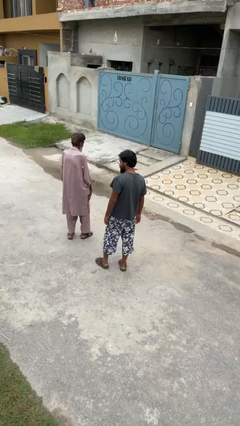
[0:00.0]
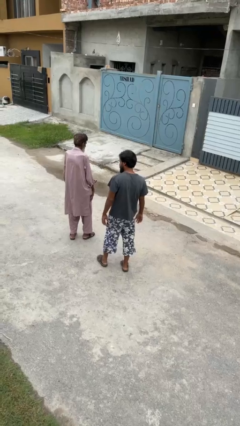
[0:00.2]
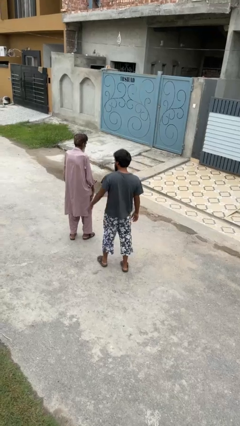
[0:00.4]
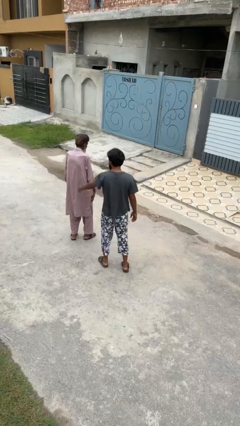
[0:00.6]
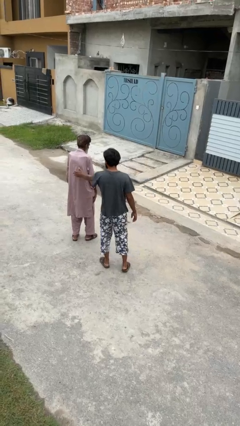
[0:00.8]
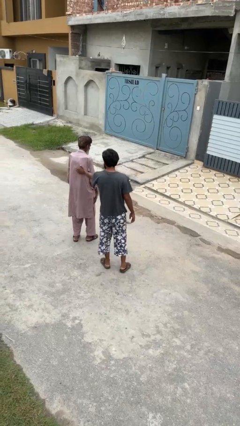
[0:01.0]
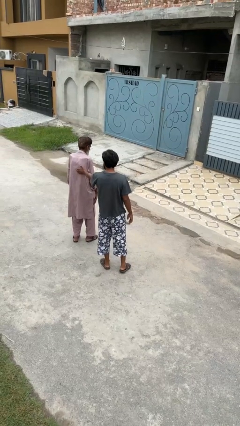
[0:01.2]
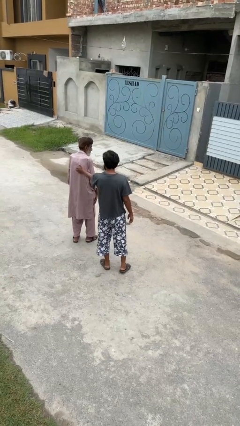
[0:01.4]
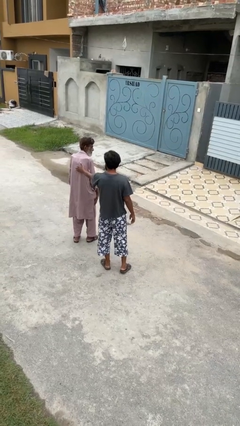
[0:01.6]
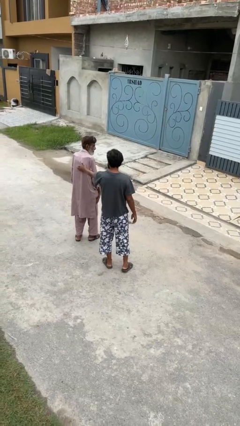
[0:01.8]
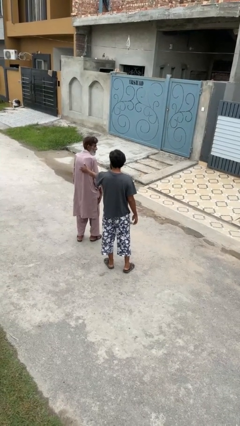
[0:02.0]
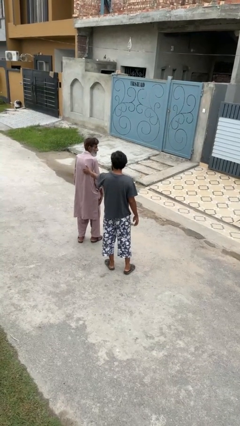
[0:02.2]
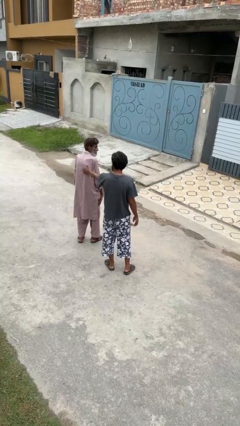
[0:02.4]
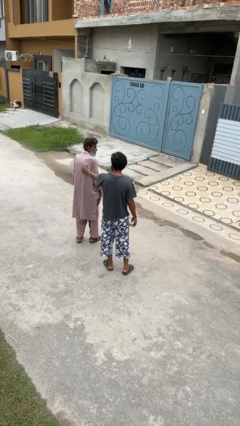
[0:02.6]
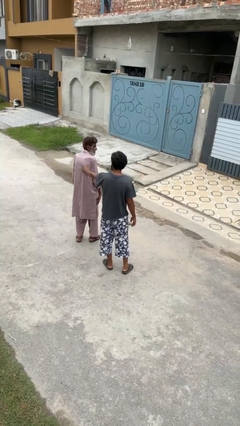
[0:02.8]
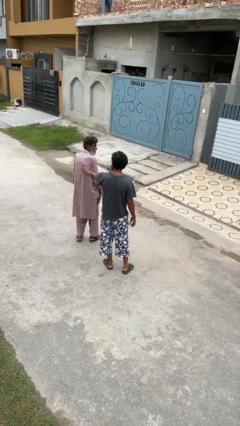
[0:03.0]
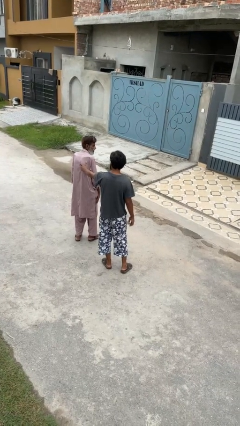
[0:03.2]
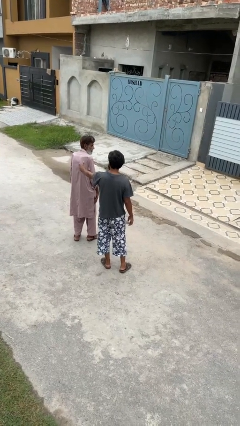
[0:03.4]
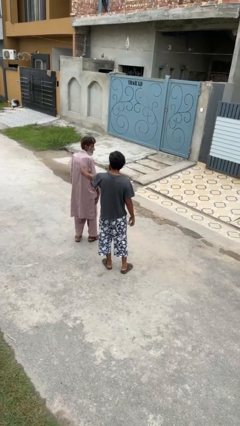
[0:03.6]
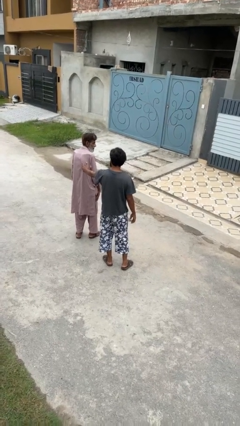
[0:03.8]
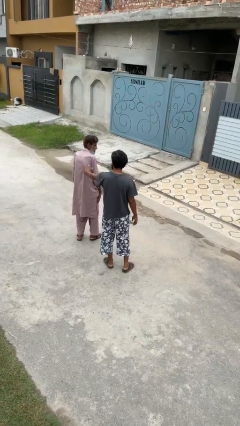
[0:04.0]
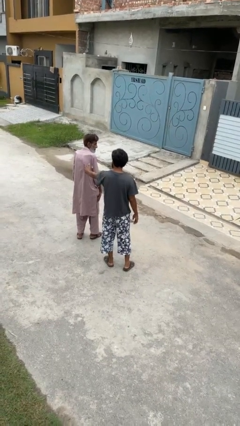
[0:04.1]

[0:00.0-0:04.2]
person touches back of person

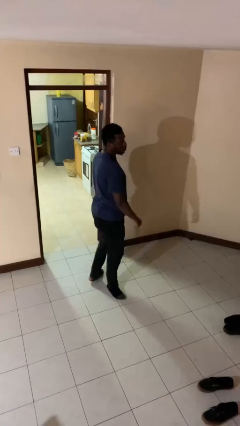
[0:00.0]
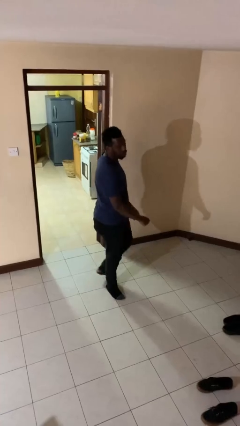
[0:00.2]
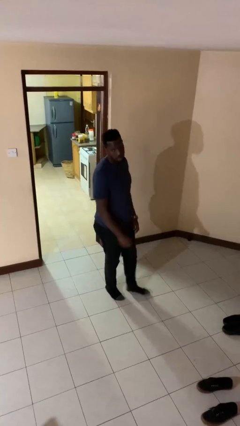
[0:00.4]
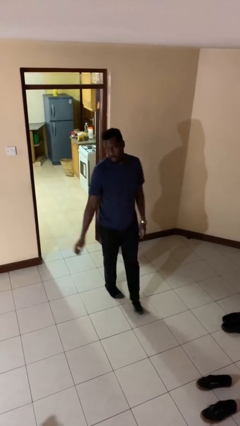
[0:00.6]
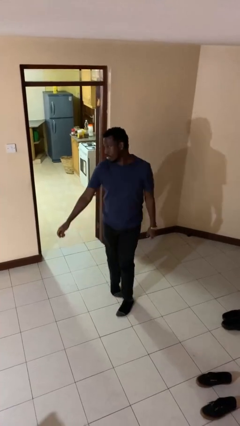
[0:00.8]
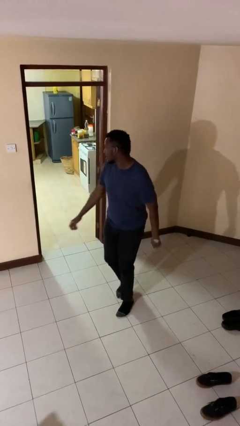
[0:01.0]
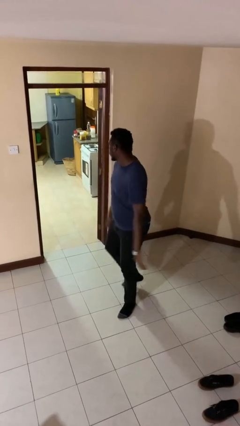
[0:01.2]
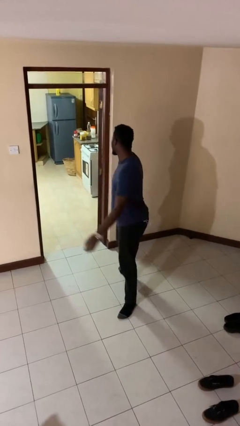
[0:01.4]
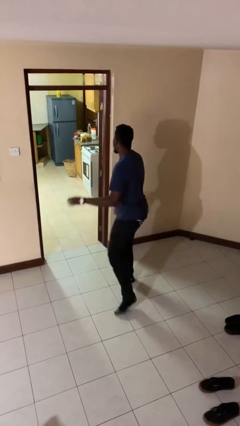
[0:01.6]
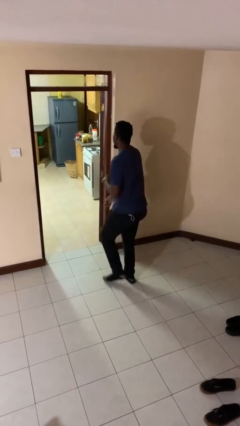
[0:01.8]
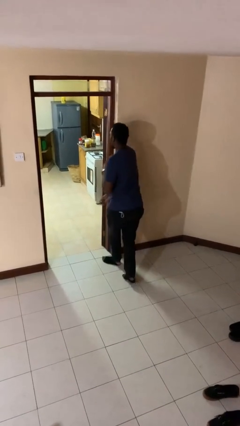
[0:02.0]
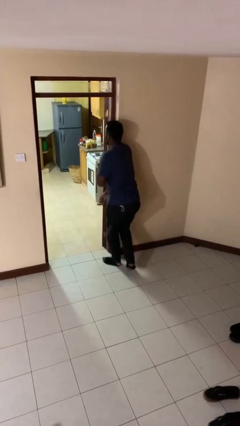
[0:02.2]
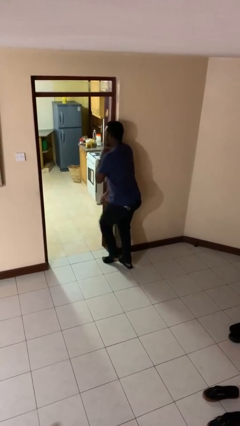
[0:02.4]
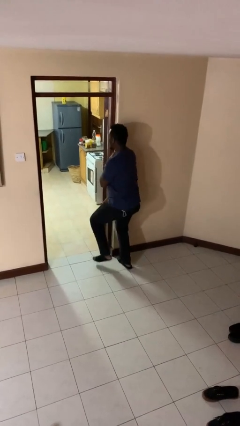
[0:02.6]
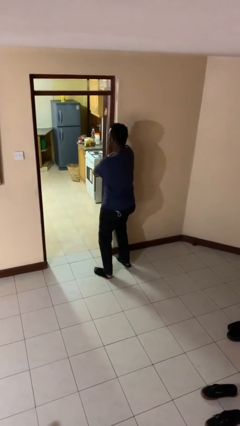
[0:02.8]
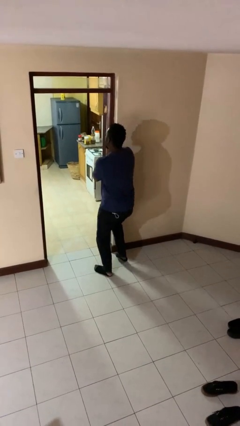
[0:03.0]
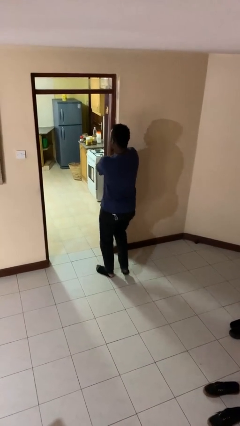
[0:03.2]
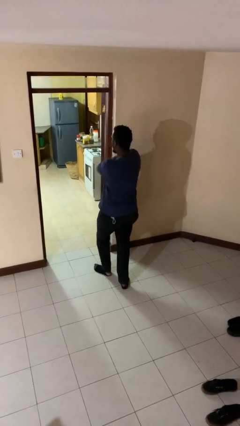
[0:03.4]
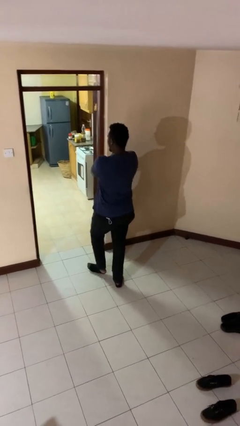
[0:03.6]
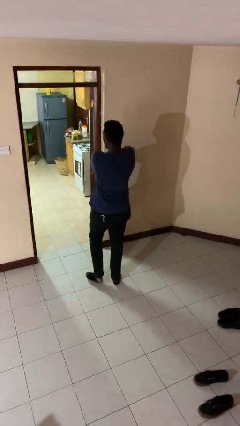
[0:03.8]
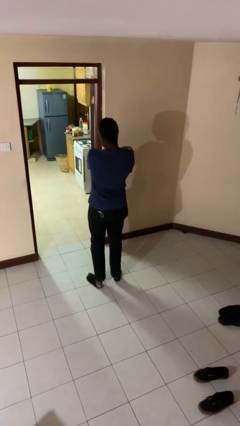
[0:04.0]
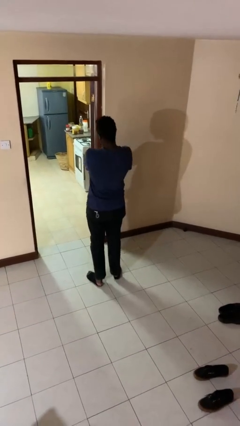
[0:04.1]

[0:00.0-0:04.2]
person bumps into wall

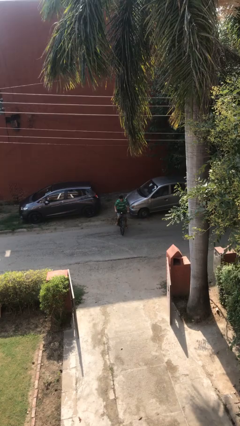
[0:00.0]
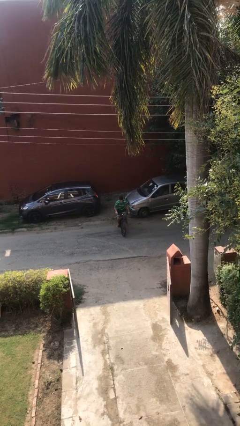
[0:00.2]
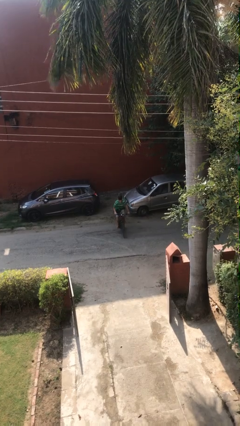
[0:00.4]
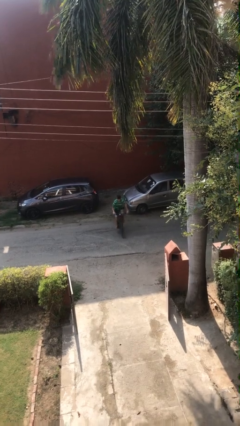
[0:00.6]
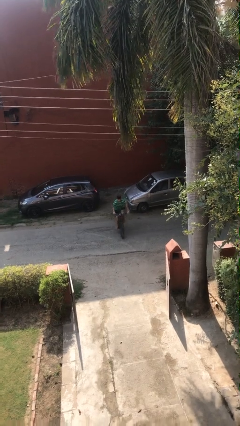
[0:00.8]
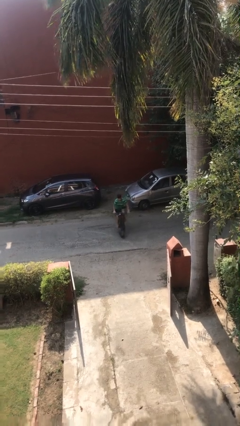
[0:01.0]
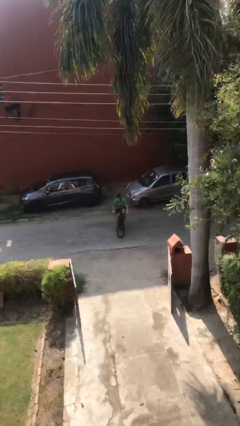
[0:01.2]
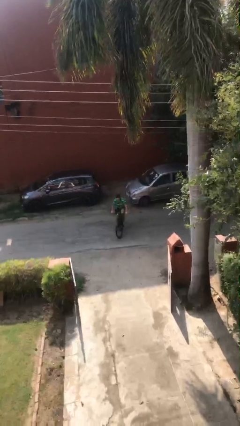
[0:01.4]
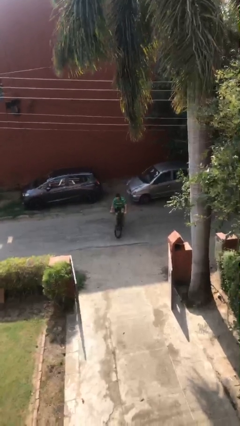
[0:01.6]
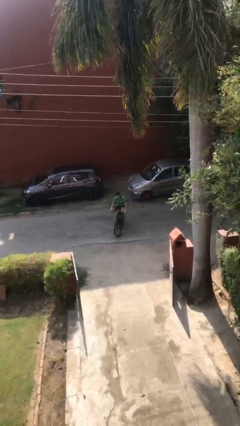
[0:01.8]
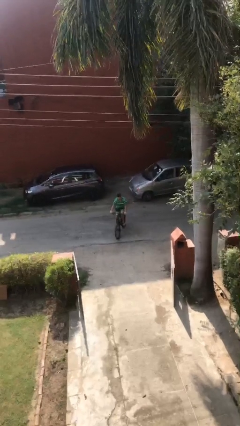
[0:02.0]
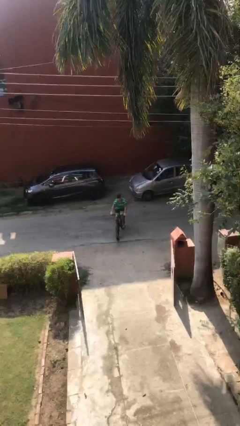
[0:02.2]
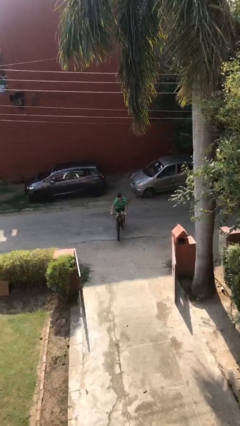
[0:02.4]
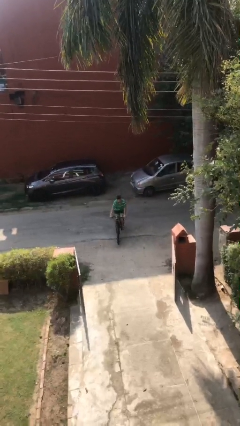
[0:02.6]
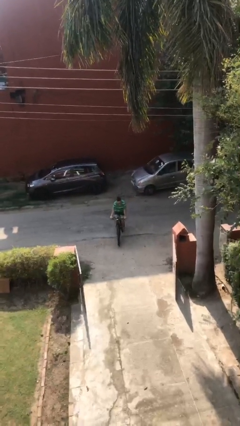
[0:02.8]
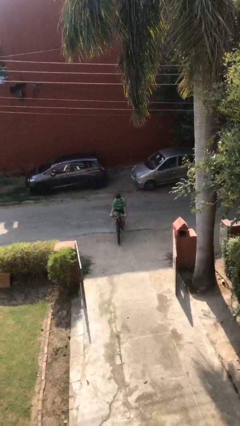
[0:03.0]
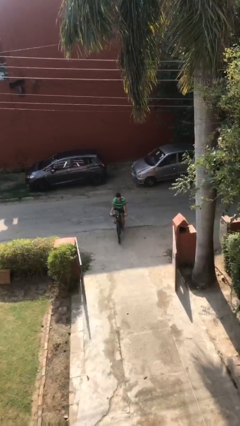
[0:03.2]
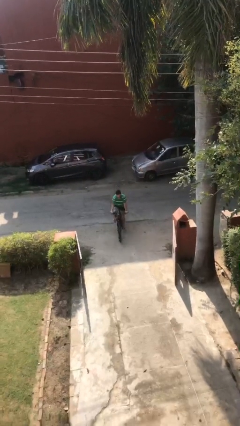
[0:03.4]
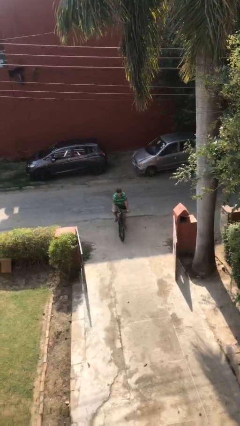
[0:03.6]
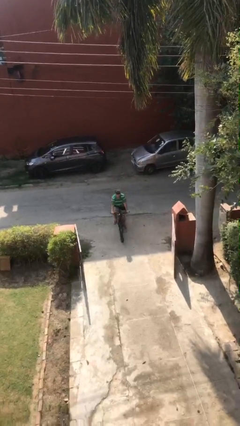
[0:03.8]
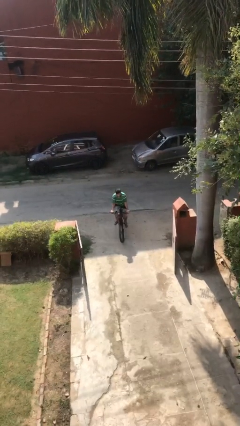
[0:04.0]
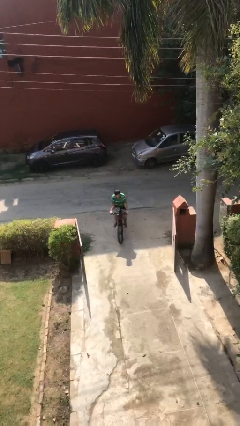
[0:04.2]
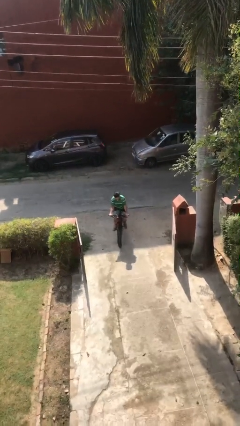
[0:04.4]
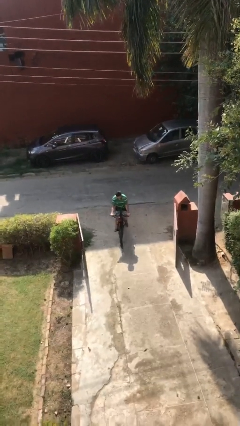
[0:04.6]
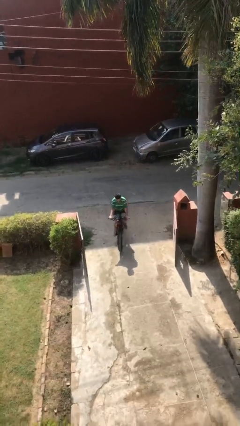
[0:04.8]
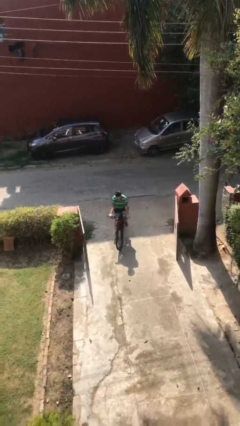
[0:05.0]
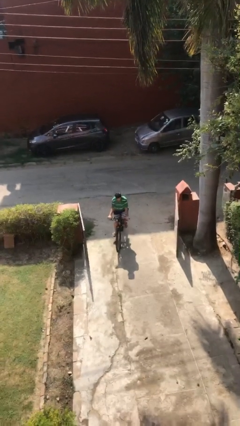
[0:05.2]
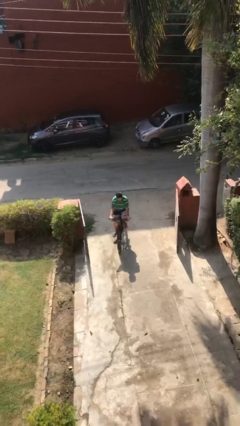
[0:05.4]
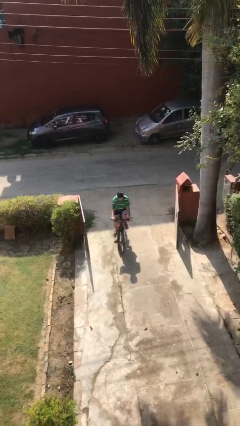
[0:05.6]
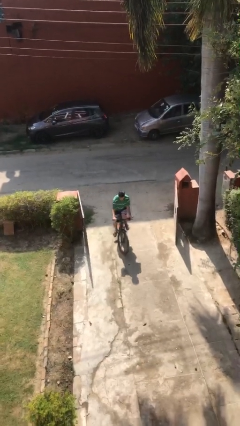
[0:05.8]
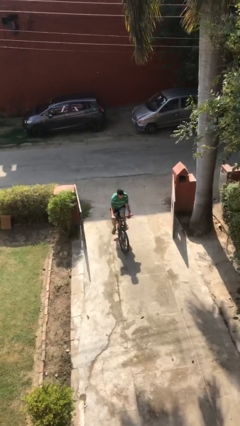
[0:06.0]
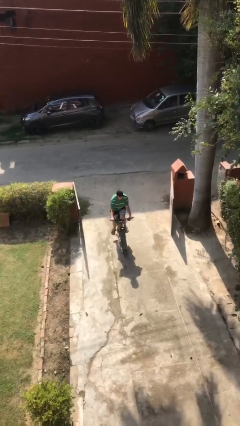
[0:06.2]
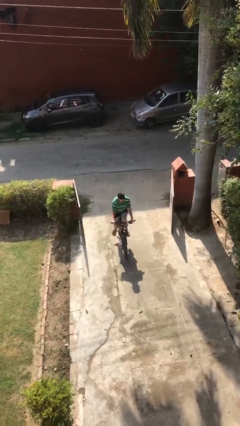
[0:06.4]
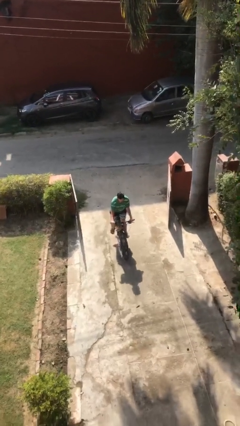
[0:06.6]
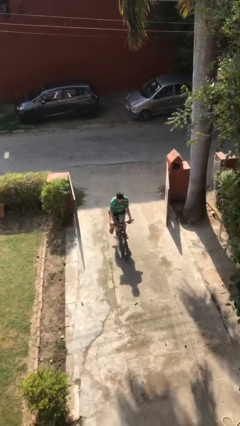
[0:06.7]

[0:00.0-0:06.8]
person rides bicycle

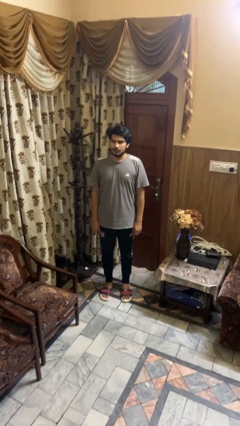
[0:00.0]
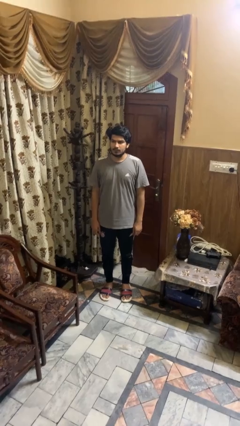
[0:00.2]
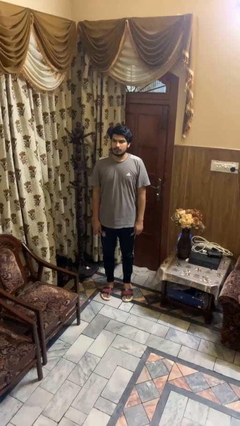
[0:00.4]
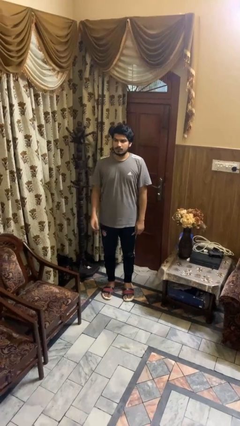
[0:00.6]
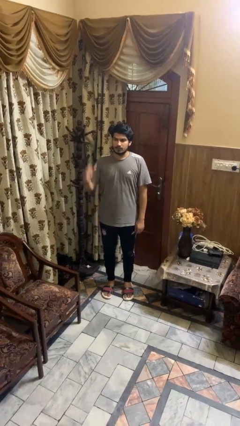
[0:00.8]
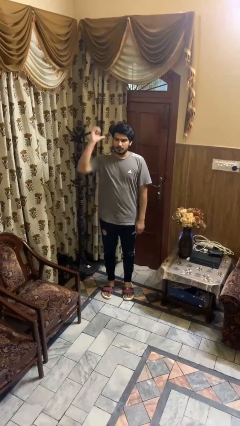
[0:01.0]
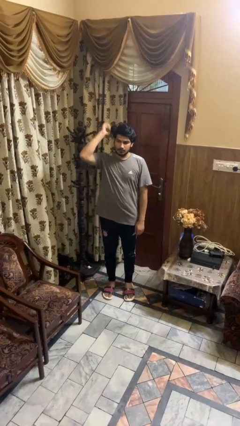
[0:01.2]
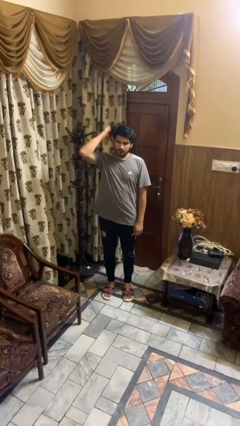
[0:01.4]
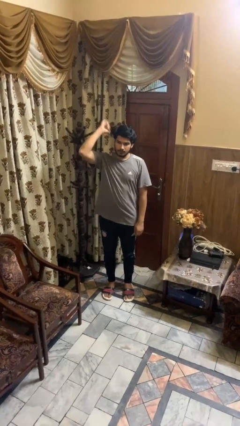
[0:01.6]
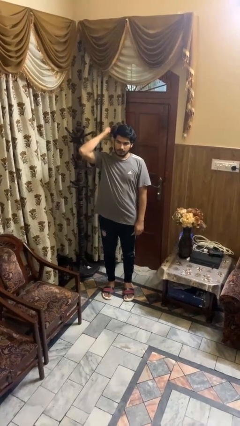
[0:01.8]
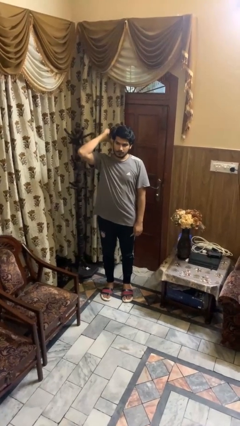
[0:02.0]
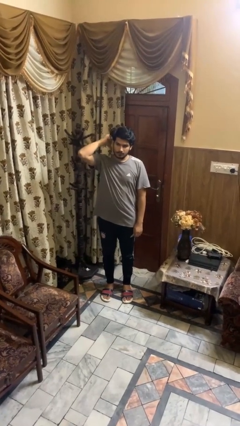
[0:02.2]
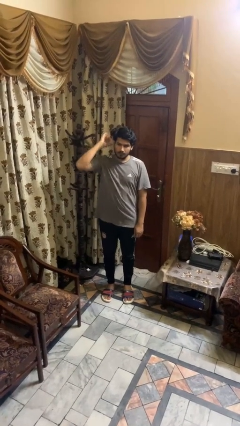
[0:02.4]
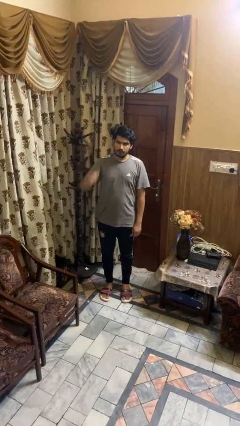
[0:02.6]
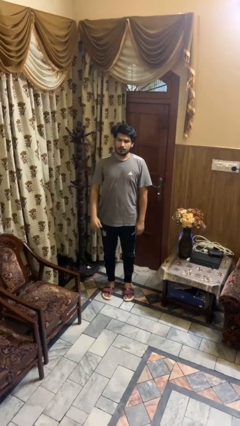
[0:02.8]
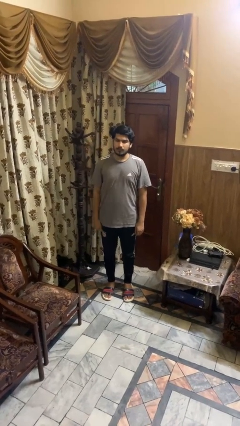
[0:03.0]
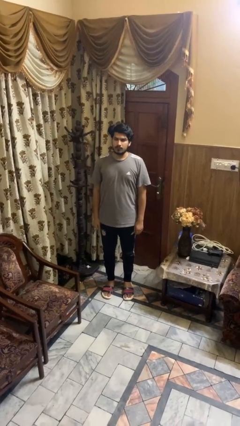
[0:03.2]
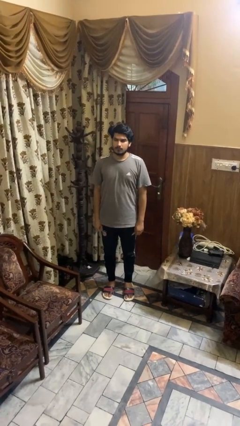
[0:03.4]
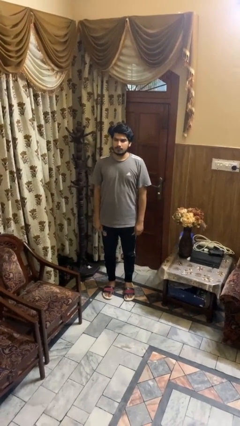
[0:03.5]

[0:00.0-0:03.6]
person gestures behind me
